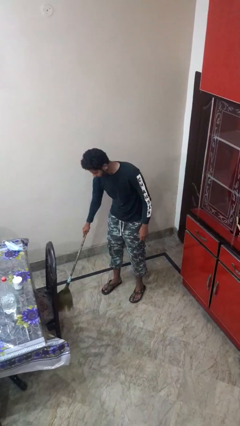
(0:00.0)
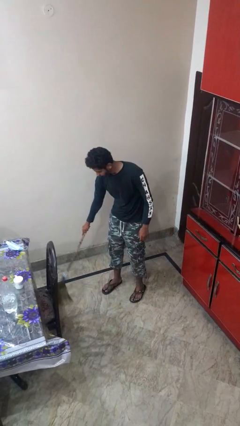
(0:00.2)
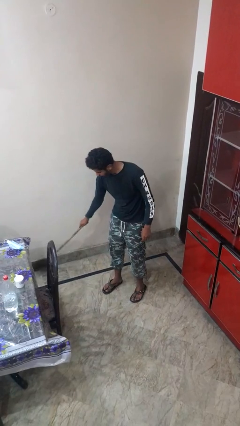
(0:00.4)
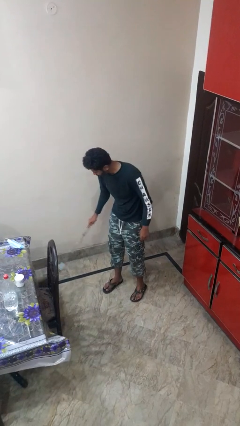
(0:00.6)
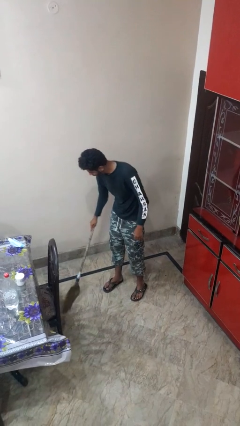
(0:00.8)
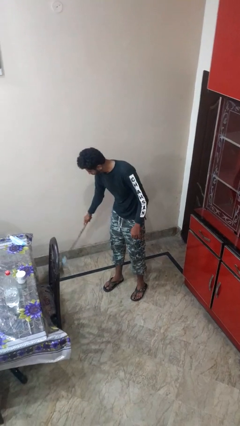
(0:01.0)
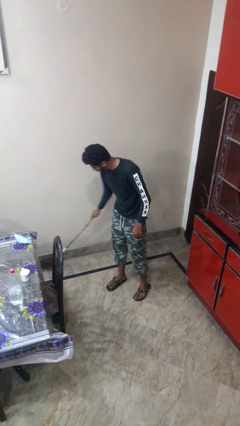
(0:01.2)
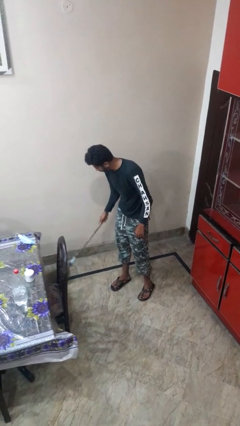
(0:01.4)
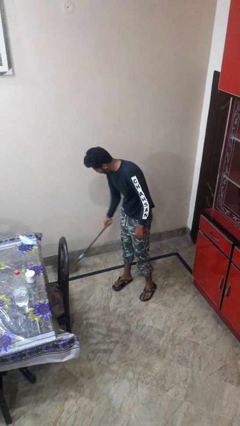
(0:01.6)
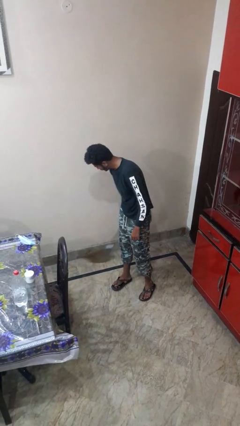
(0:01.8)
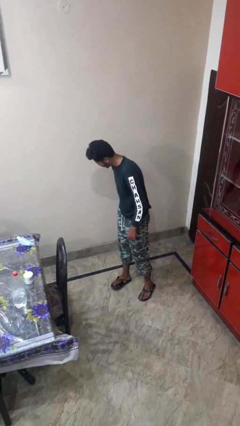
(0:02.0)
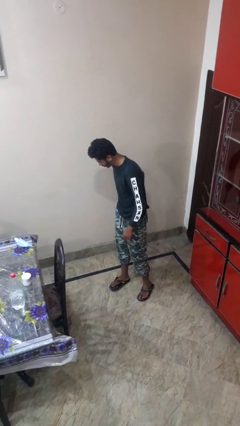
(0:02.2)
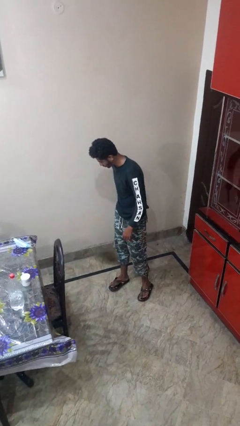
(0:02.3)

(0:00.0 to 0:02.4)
person sweeps floor

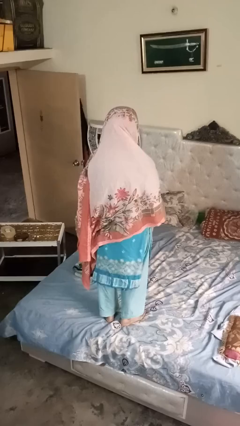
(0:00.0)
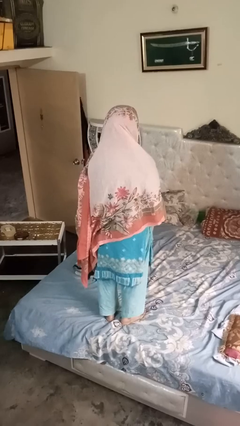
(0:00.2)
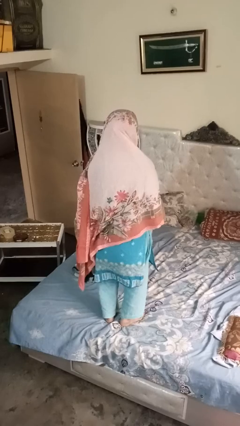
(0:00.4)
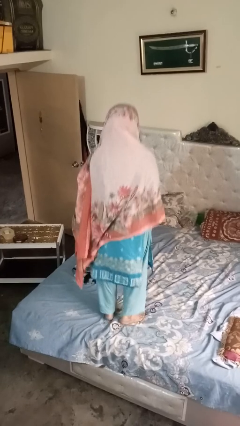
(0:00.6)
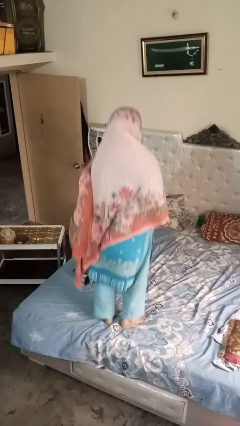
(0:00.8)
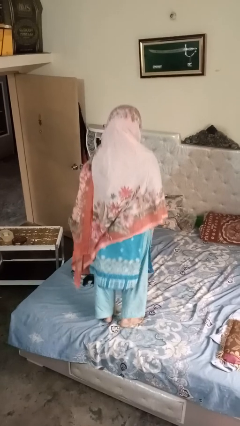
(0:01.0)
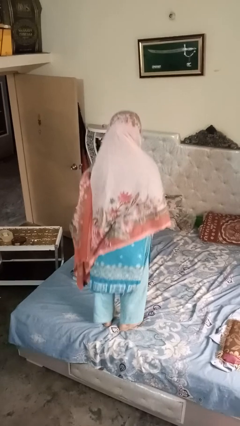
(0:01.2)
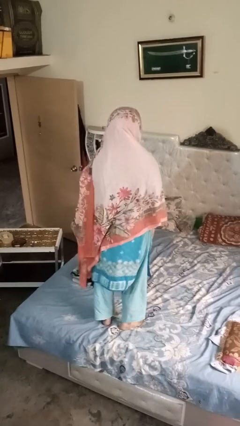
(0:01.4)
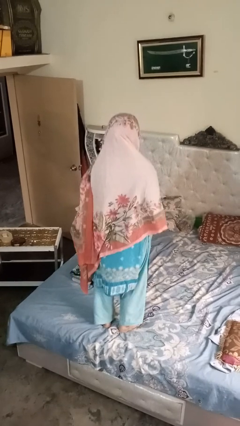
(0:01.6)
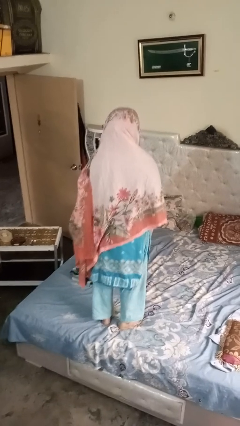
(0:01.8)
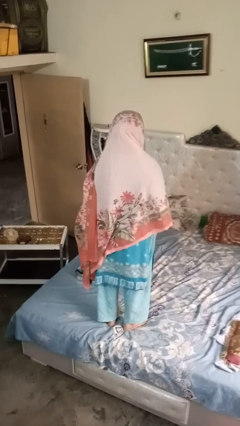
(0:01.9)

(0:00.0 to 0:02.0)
person jumps on bed

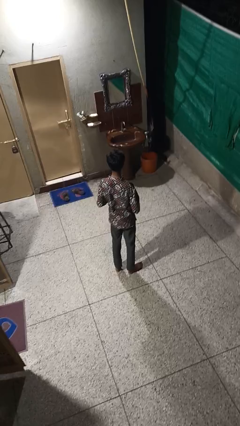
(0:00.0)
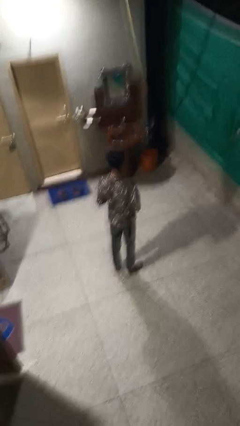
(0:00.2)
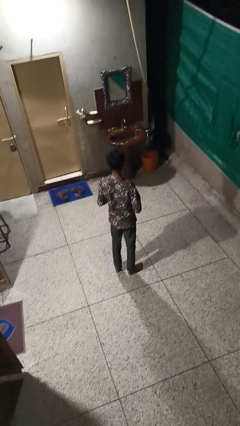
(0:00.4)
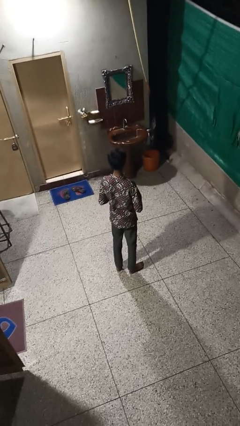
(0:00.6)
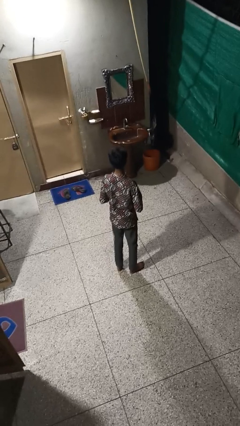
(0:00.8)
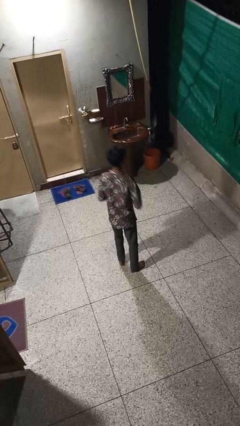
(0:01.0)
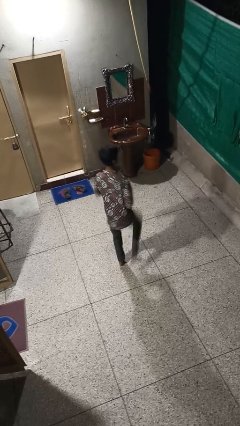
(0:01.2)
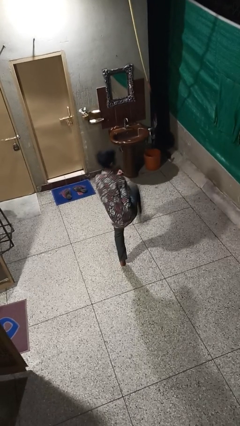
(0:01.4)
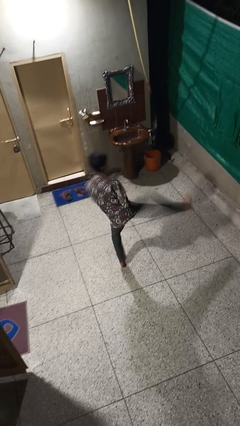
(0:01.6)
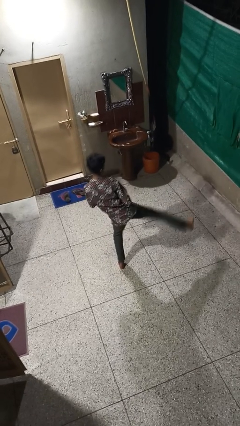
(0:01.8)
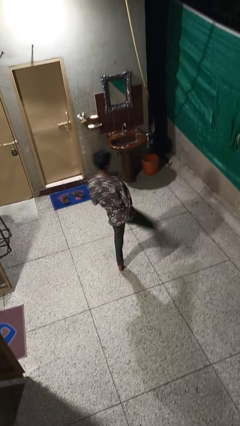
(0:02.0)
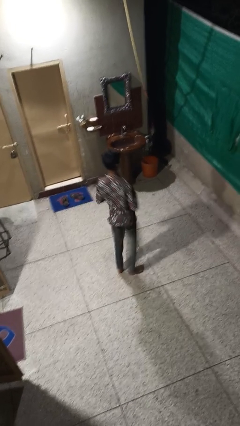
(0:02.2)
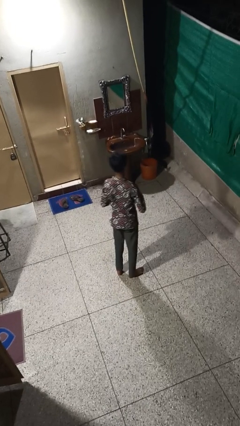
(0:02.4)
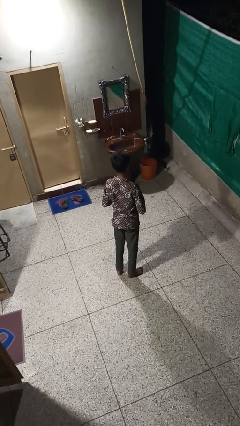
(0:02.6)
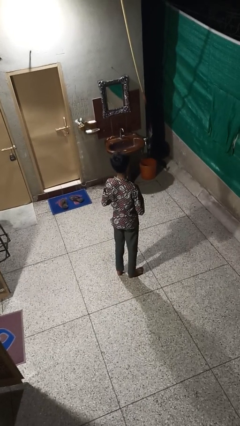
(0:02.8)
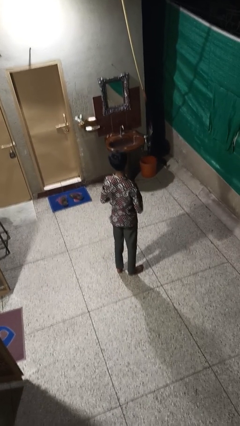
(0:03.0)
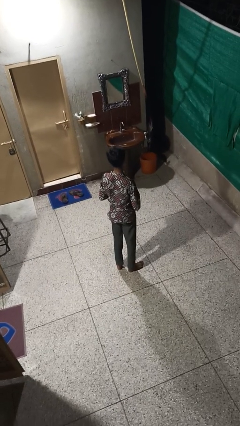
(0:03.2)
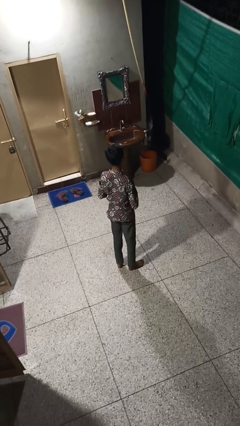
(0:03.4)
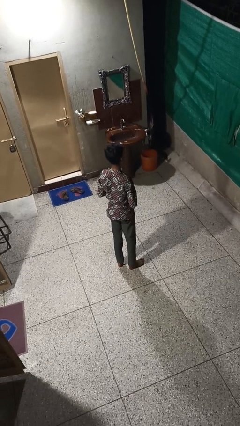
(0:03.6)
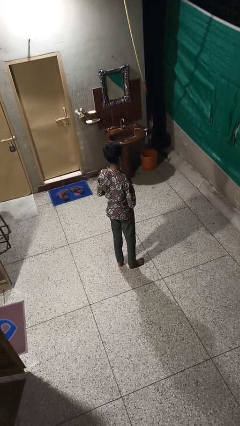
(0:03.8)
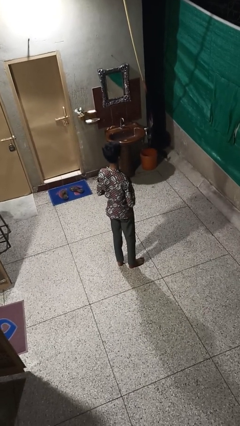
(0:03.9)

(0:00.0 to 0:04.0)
person karate kicks

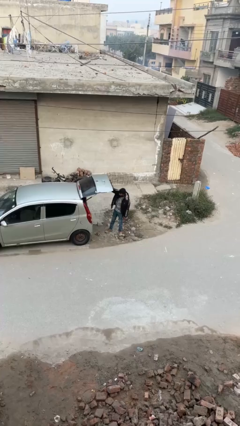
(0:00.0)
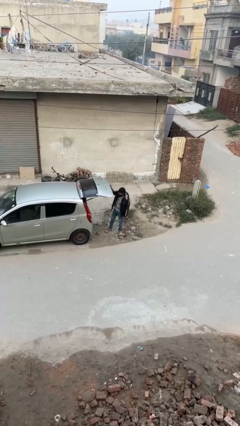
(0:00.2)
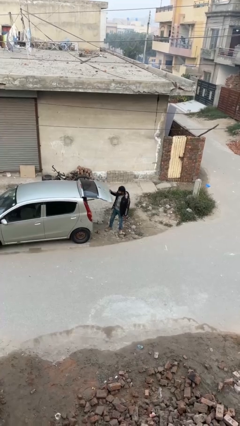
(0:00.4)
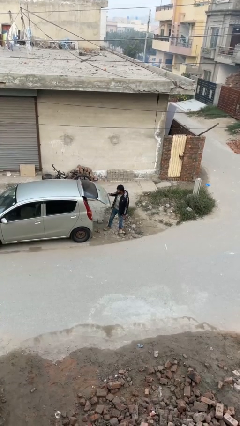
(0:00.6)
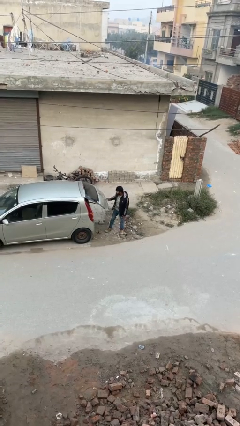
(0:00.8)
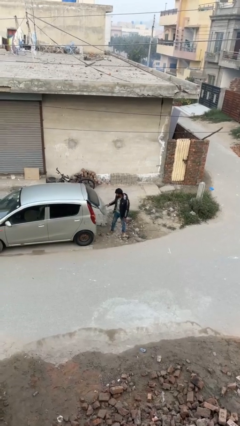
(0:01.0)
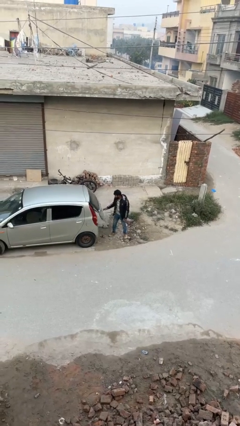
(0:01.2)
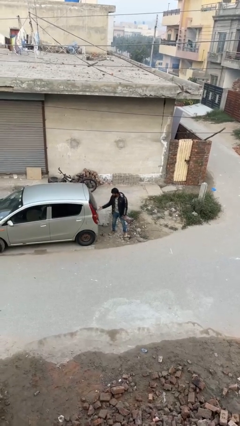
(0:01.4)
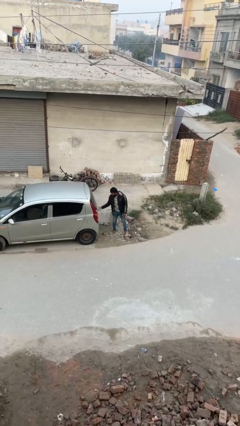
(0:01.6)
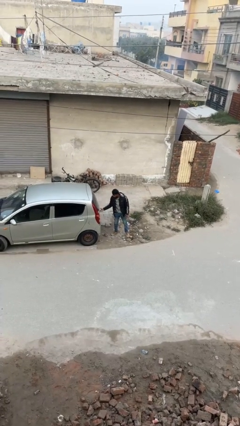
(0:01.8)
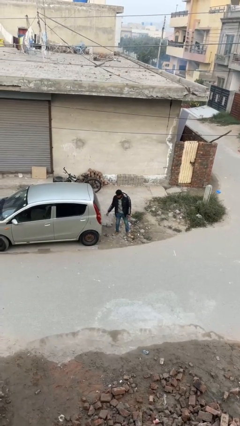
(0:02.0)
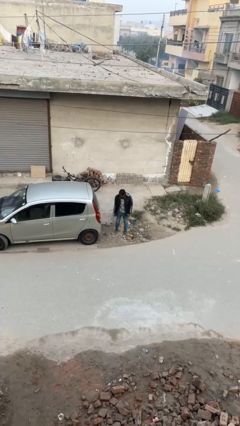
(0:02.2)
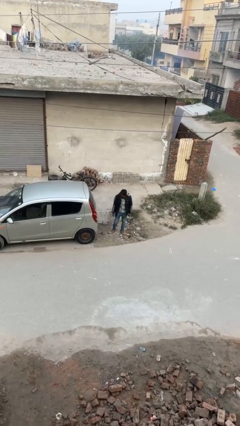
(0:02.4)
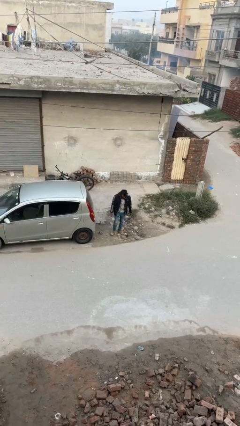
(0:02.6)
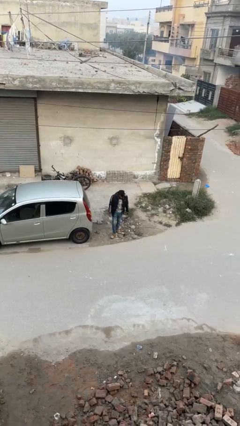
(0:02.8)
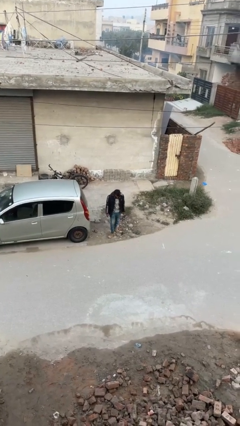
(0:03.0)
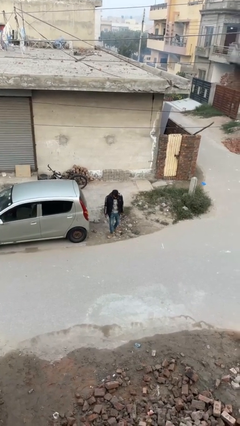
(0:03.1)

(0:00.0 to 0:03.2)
person closes car trunk

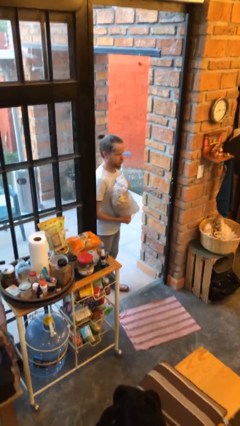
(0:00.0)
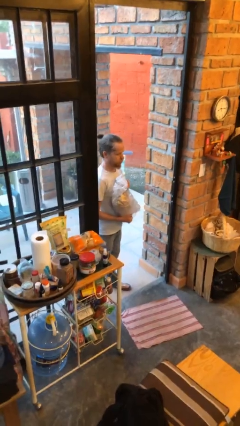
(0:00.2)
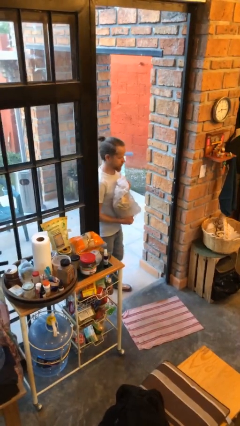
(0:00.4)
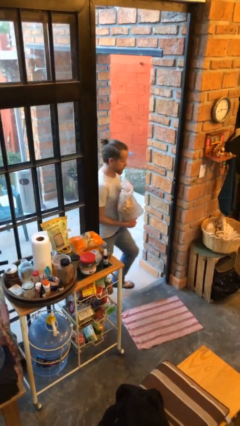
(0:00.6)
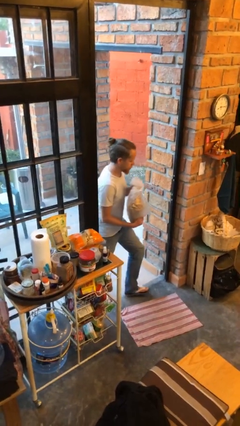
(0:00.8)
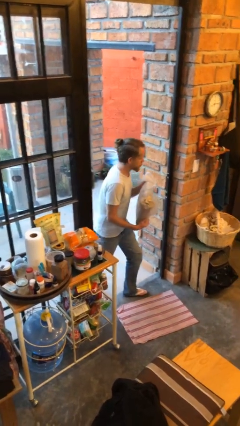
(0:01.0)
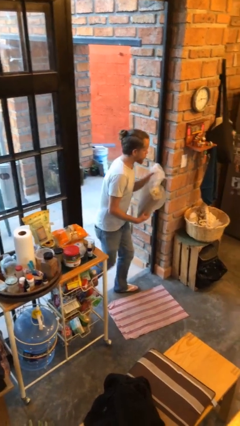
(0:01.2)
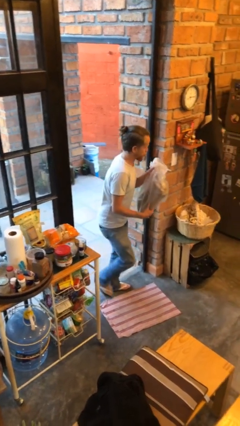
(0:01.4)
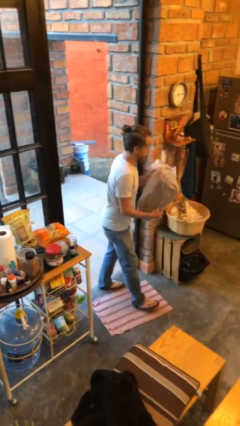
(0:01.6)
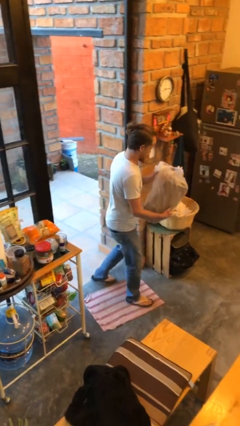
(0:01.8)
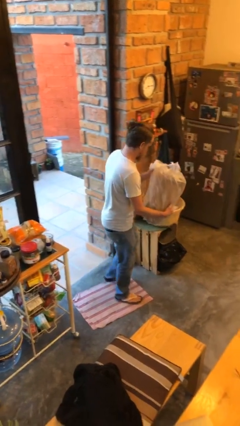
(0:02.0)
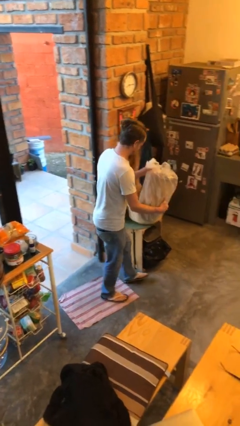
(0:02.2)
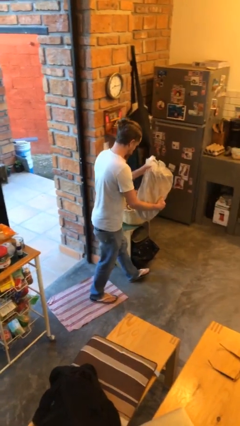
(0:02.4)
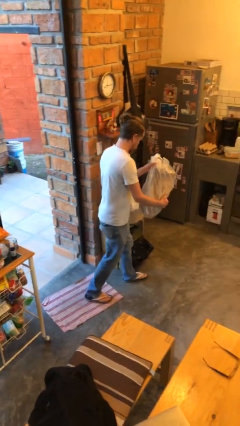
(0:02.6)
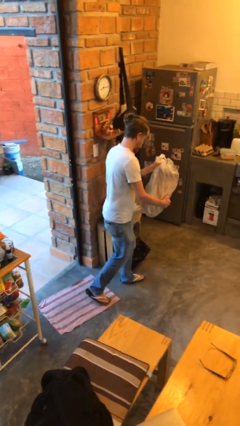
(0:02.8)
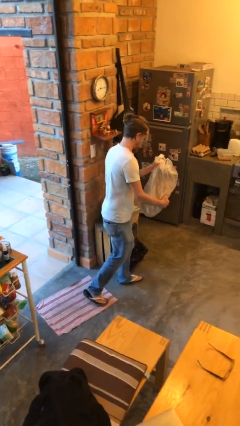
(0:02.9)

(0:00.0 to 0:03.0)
person carries groceries

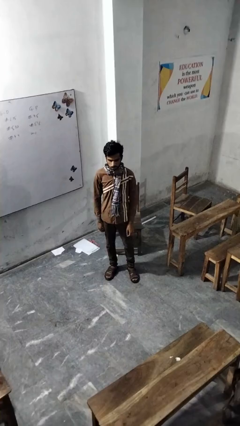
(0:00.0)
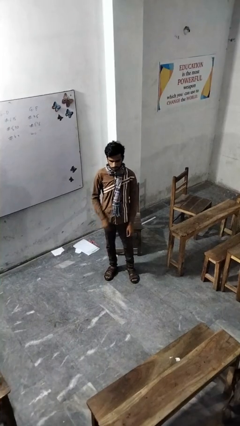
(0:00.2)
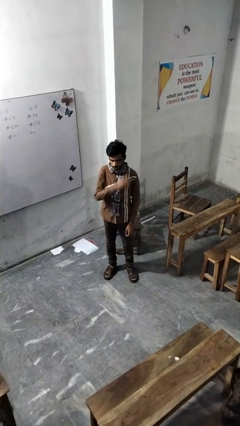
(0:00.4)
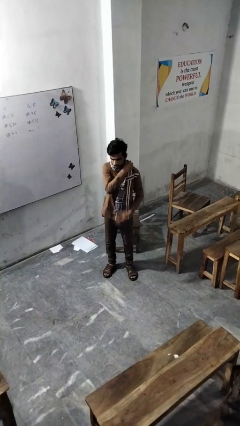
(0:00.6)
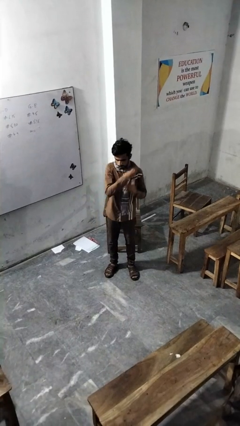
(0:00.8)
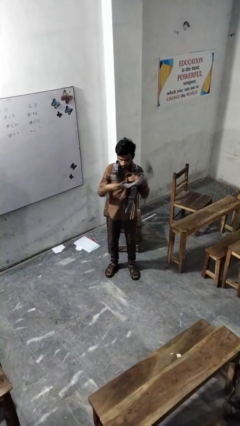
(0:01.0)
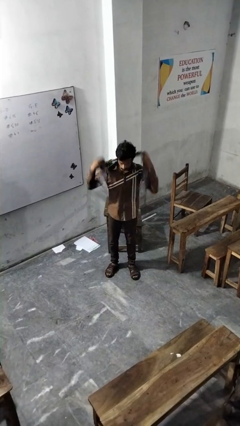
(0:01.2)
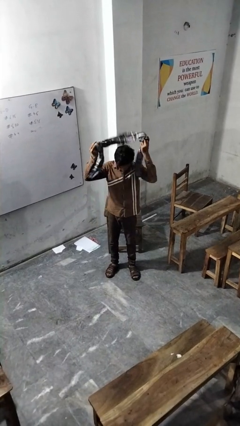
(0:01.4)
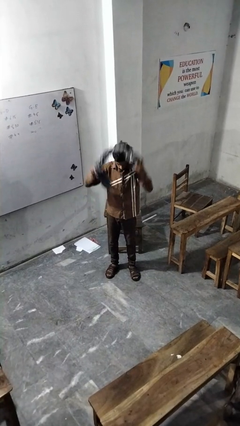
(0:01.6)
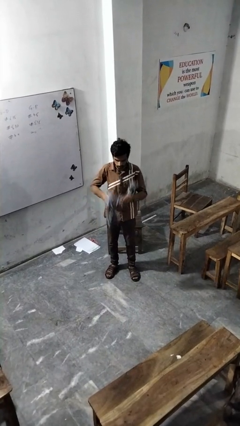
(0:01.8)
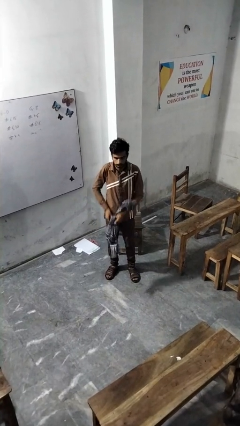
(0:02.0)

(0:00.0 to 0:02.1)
person takes off scarf

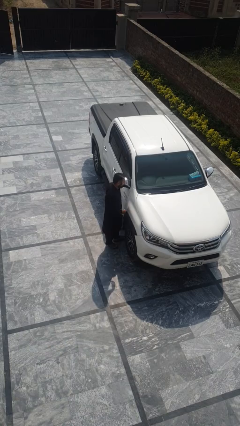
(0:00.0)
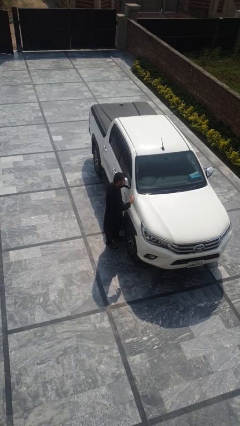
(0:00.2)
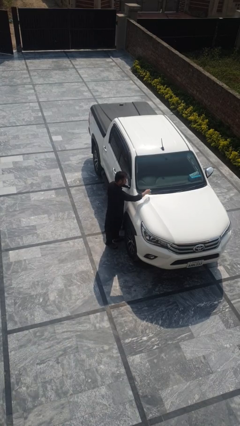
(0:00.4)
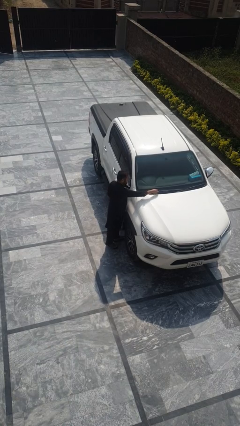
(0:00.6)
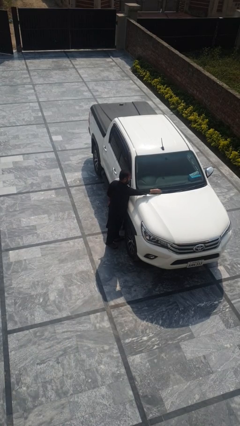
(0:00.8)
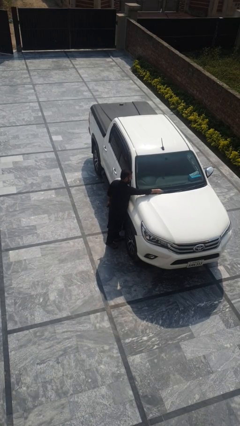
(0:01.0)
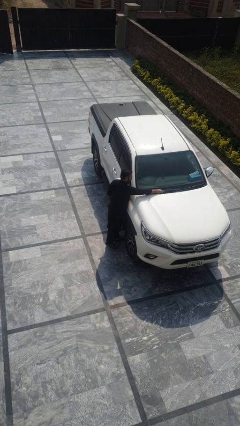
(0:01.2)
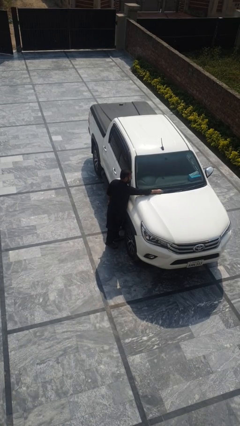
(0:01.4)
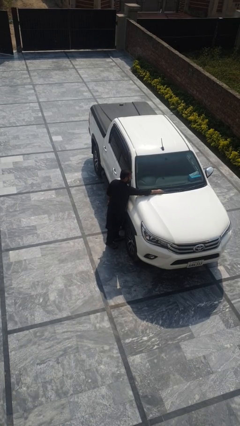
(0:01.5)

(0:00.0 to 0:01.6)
person flips up car wipers
